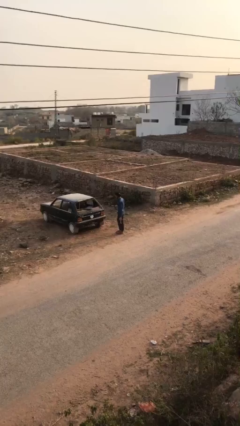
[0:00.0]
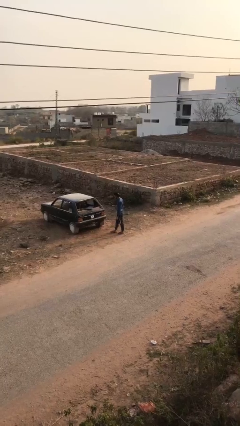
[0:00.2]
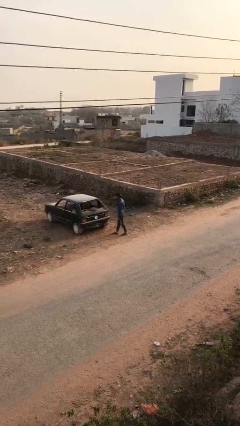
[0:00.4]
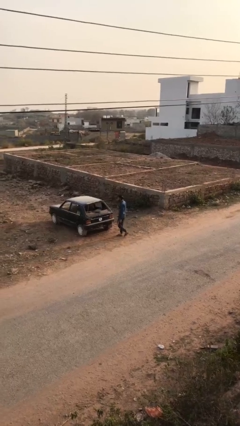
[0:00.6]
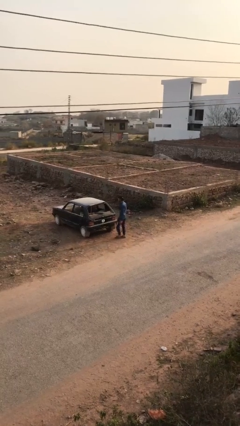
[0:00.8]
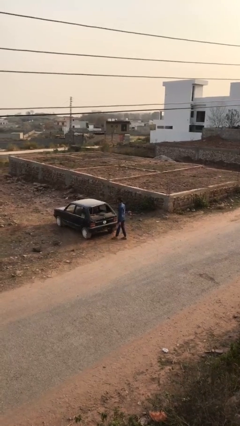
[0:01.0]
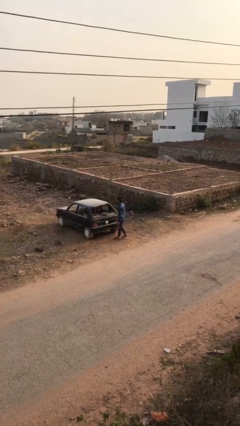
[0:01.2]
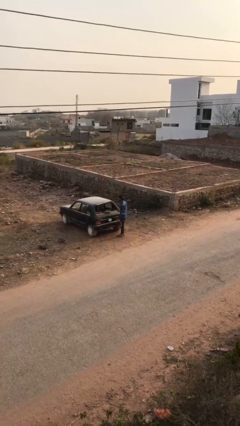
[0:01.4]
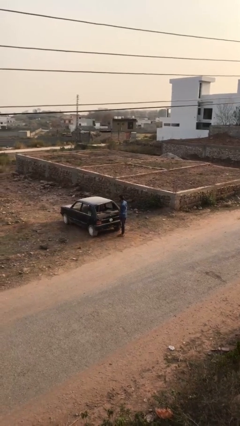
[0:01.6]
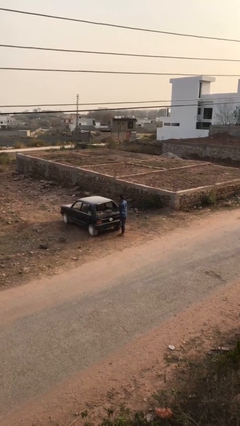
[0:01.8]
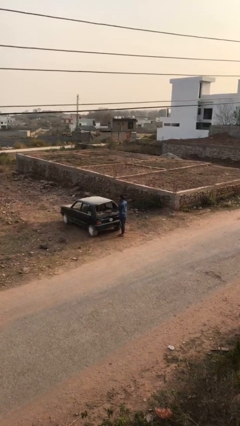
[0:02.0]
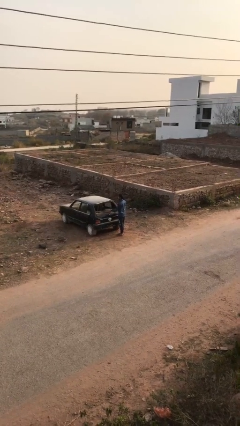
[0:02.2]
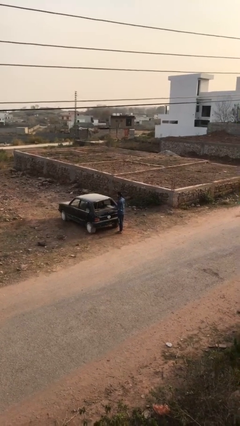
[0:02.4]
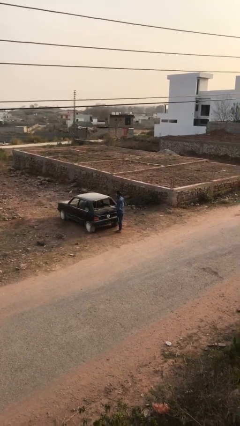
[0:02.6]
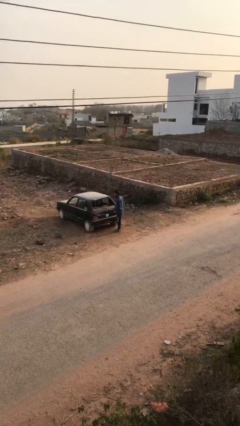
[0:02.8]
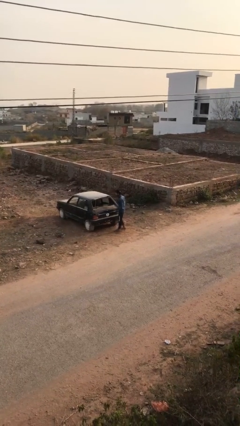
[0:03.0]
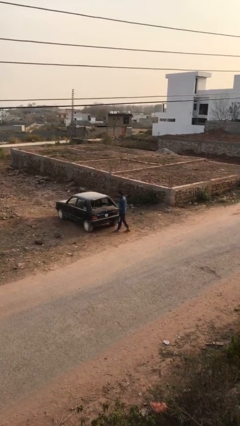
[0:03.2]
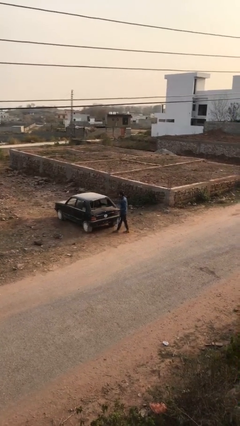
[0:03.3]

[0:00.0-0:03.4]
person unloads car

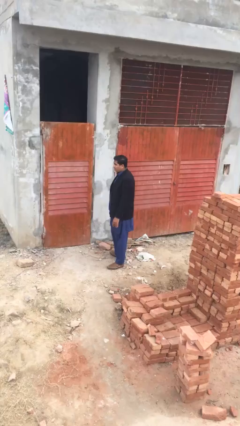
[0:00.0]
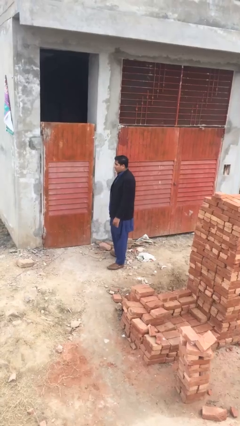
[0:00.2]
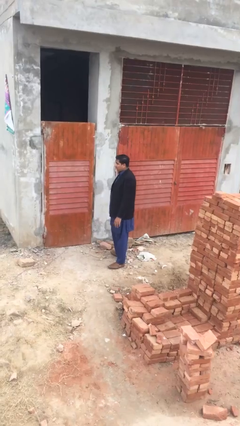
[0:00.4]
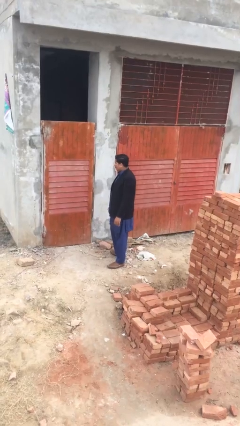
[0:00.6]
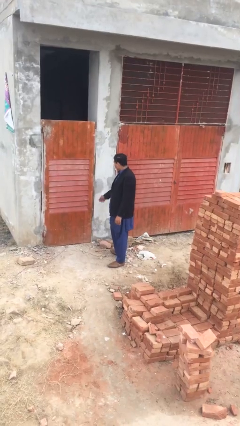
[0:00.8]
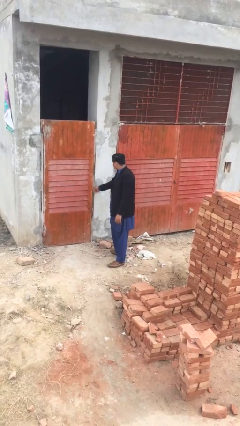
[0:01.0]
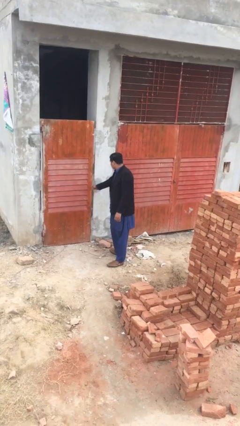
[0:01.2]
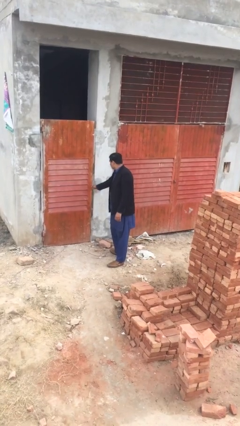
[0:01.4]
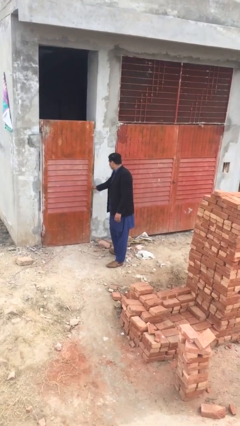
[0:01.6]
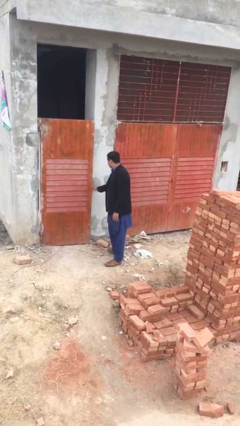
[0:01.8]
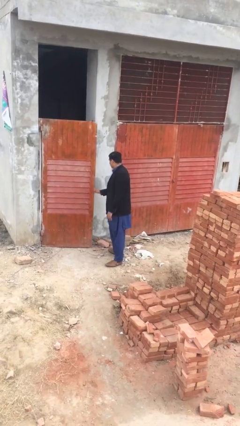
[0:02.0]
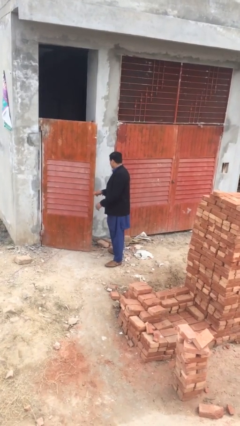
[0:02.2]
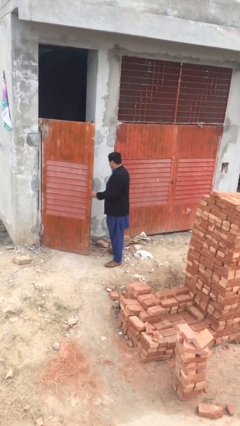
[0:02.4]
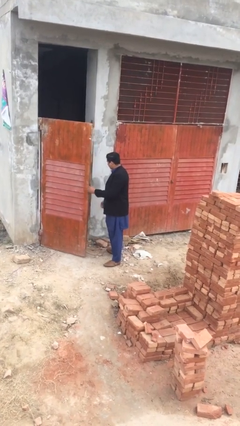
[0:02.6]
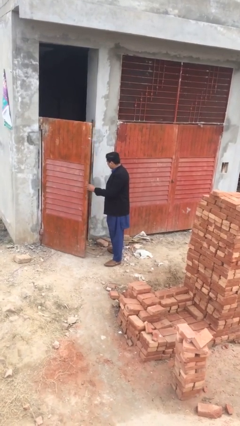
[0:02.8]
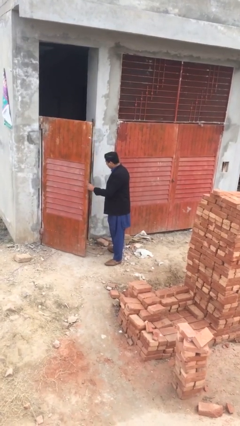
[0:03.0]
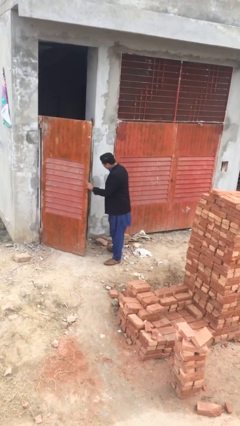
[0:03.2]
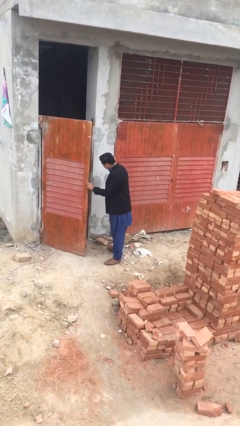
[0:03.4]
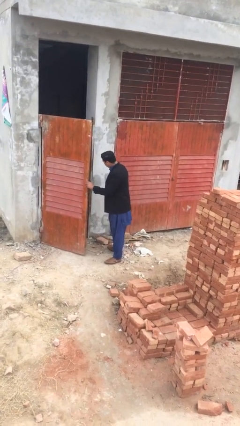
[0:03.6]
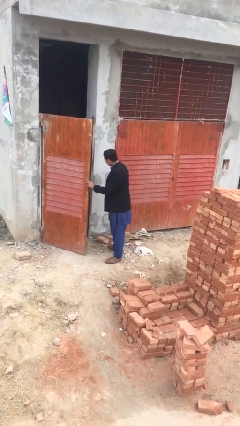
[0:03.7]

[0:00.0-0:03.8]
person opens facility door

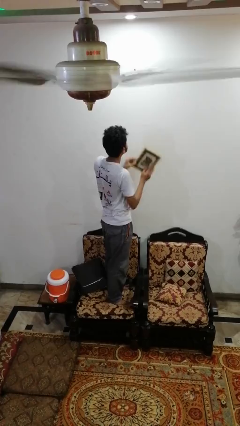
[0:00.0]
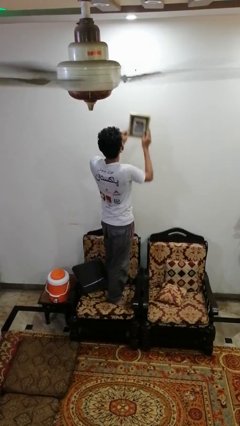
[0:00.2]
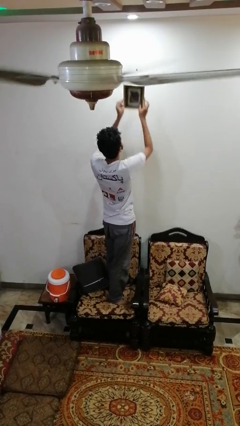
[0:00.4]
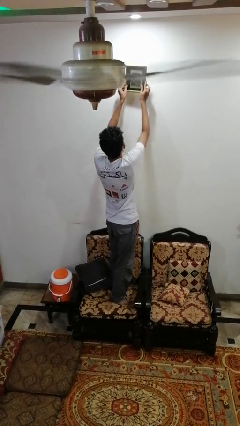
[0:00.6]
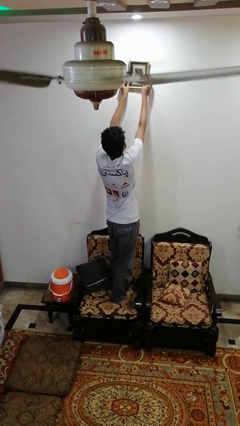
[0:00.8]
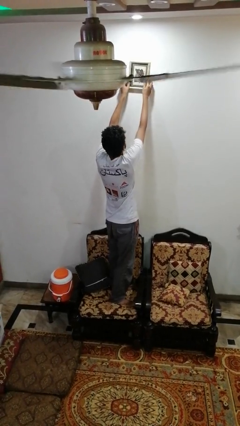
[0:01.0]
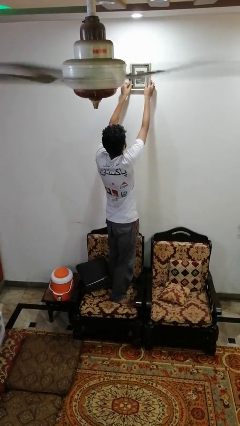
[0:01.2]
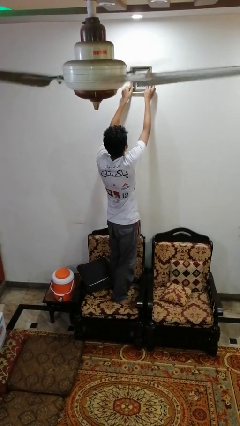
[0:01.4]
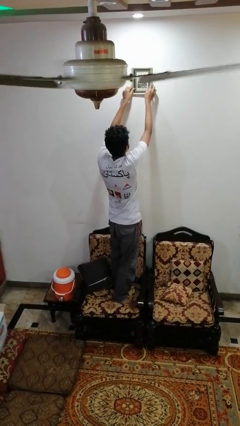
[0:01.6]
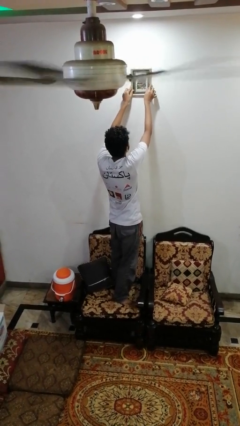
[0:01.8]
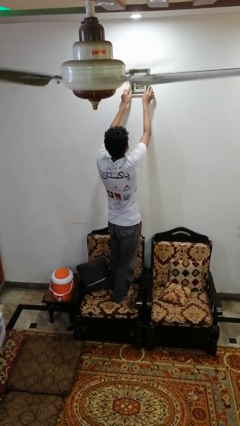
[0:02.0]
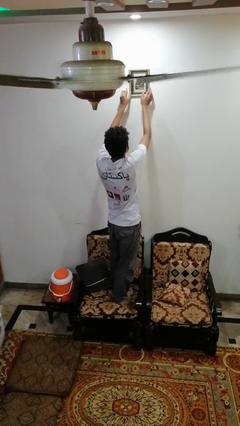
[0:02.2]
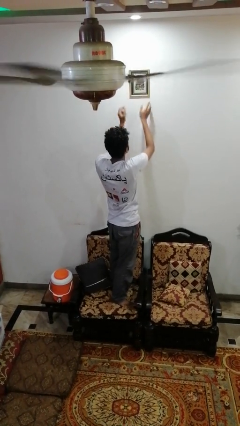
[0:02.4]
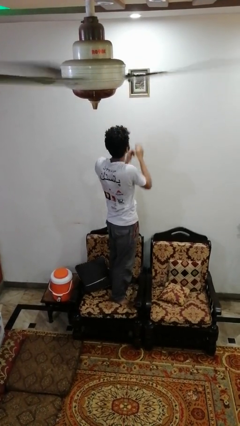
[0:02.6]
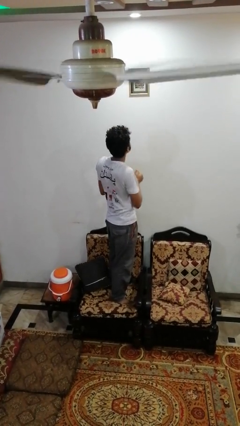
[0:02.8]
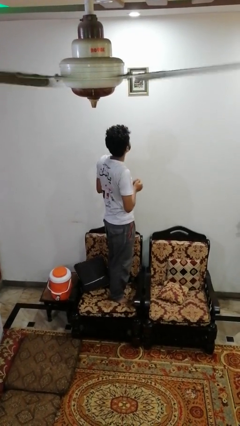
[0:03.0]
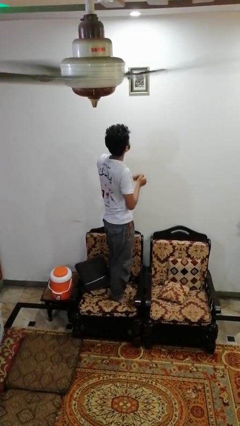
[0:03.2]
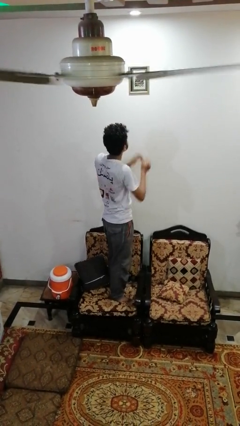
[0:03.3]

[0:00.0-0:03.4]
person puts up picture frame

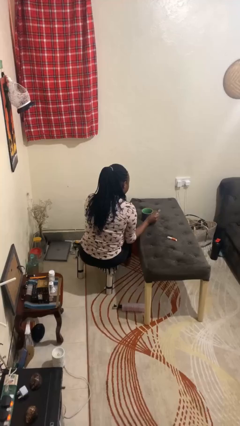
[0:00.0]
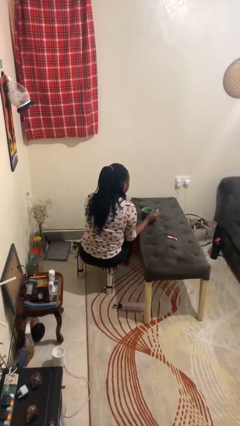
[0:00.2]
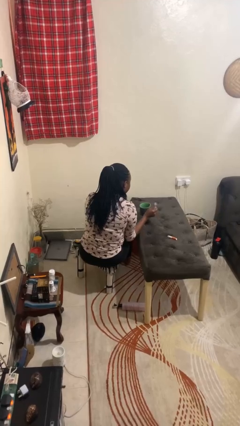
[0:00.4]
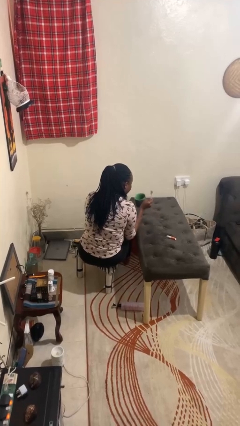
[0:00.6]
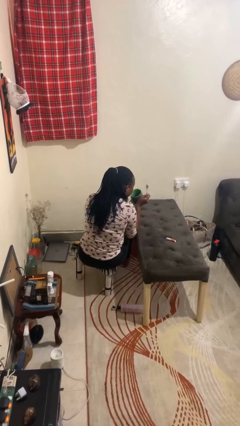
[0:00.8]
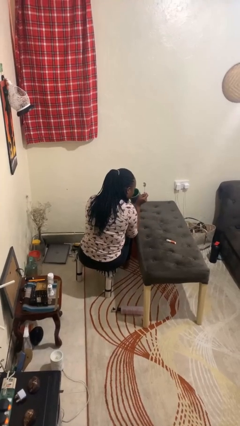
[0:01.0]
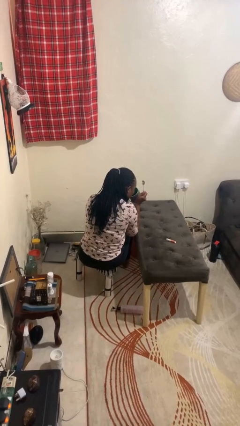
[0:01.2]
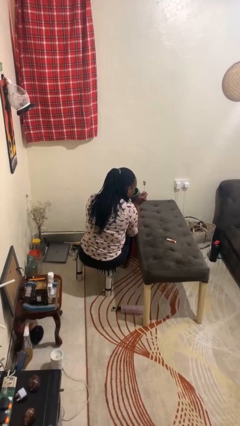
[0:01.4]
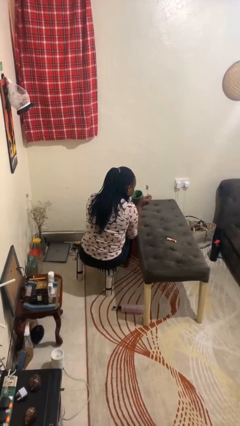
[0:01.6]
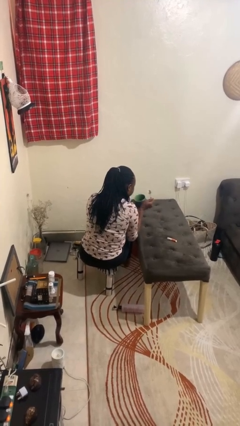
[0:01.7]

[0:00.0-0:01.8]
person drinks from mug

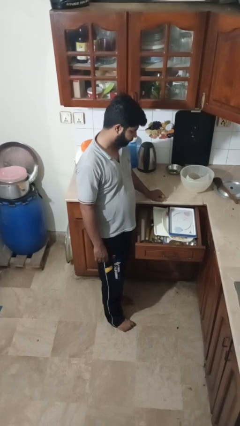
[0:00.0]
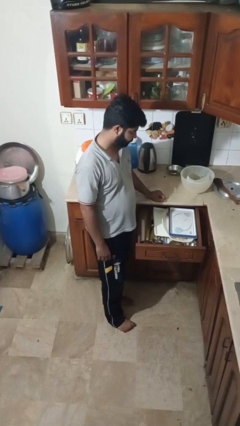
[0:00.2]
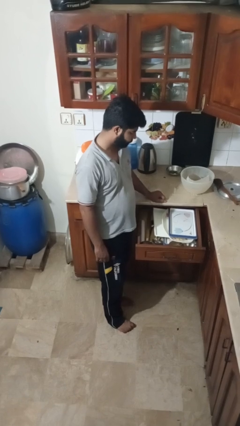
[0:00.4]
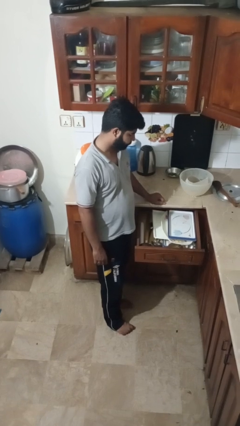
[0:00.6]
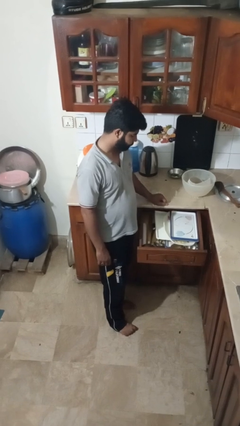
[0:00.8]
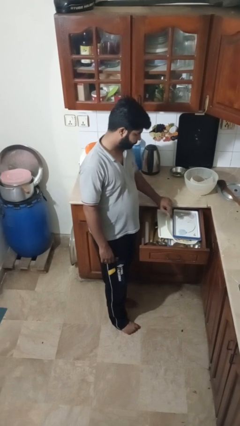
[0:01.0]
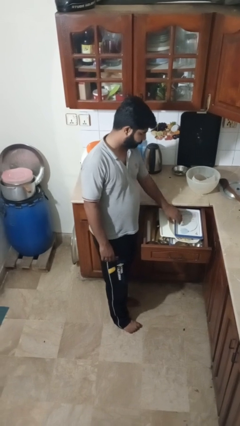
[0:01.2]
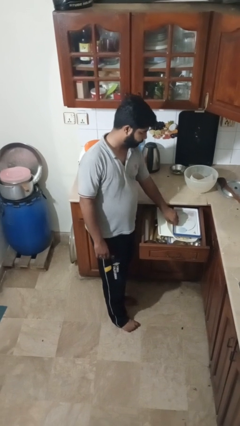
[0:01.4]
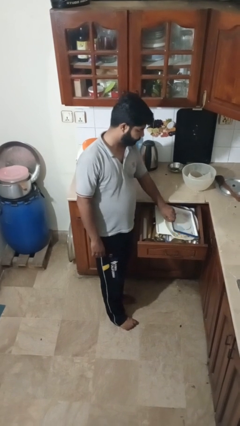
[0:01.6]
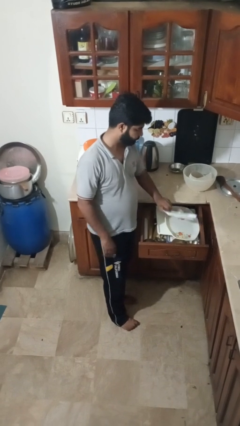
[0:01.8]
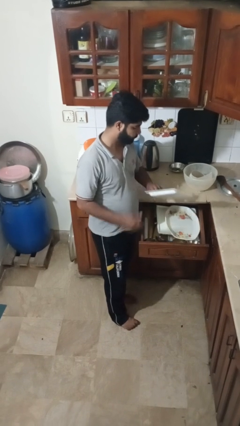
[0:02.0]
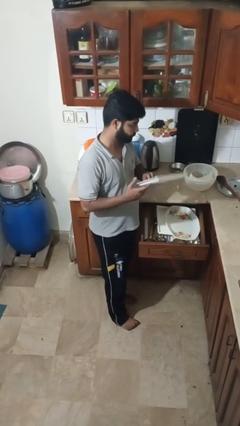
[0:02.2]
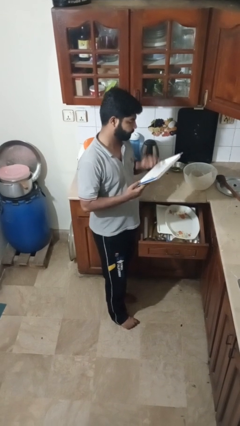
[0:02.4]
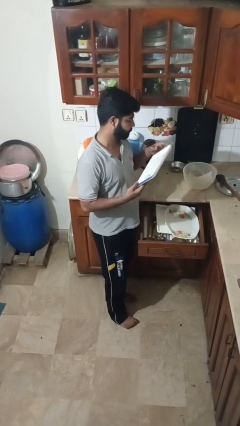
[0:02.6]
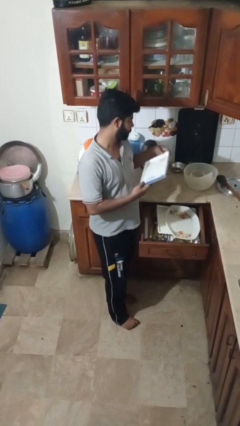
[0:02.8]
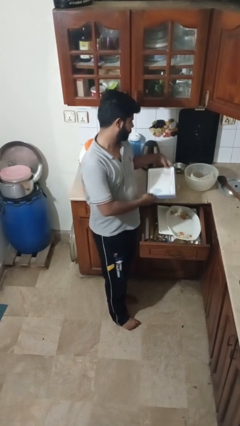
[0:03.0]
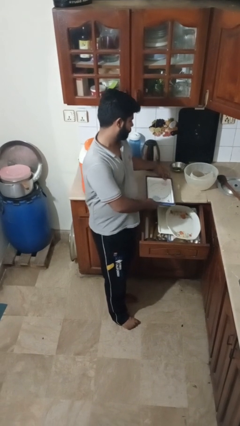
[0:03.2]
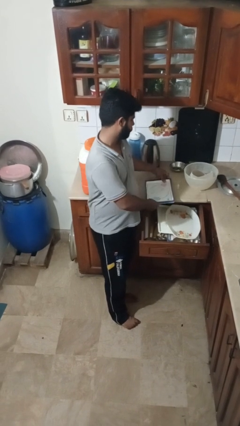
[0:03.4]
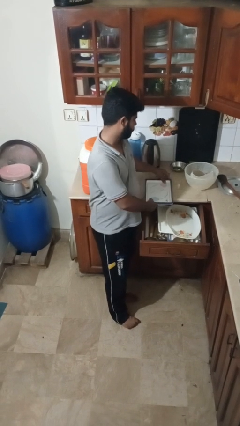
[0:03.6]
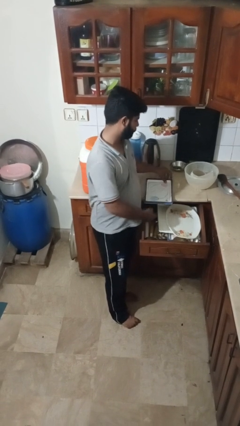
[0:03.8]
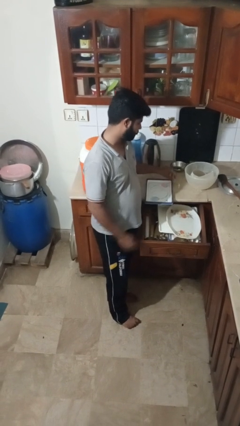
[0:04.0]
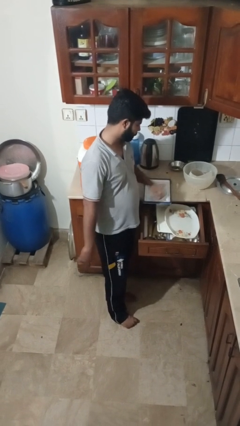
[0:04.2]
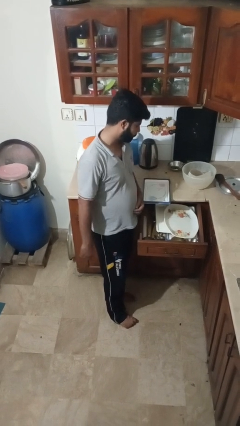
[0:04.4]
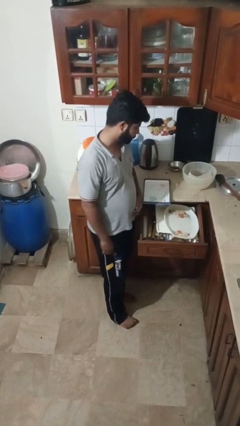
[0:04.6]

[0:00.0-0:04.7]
person takes object from kitchen drawer

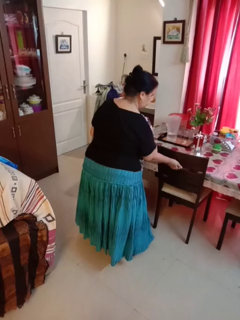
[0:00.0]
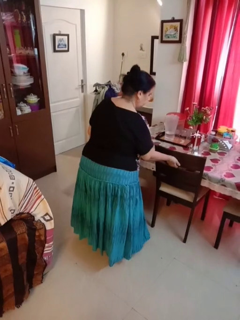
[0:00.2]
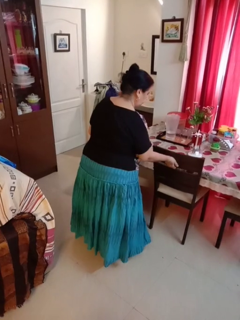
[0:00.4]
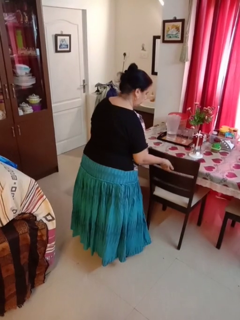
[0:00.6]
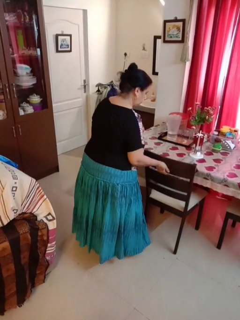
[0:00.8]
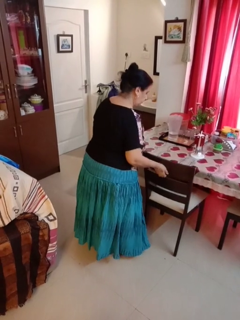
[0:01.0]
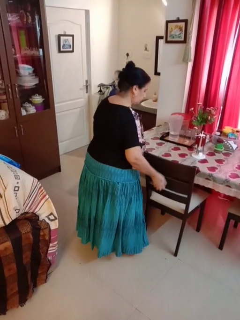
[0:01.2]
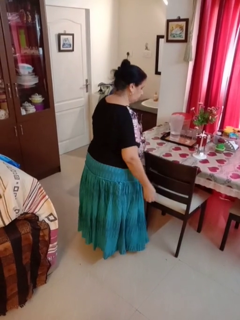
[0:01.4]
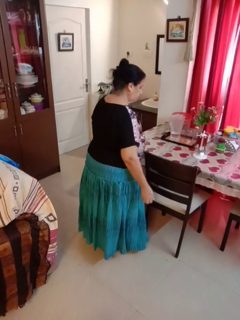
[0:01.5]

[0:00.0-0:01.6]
person pulls out chair
